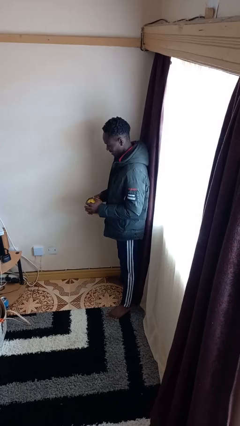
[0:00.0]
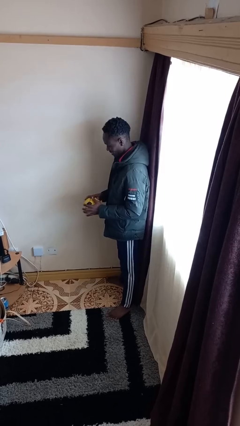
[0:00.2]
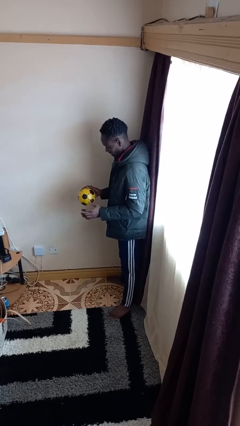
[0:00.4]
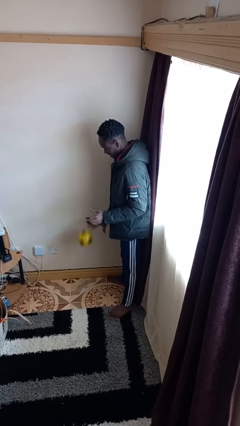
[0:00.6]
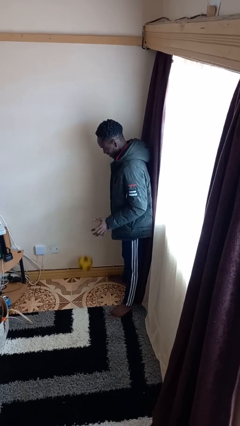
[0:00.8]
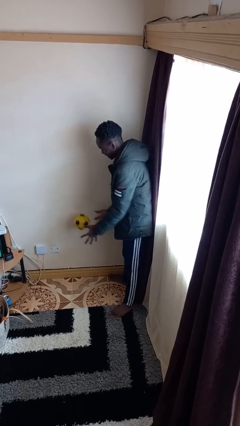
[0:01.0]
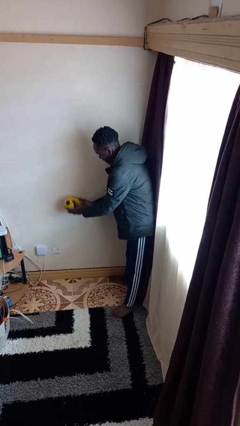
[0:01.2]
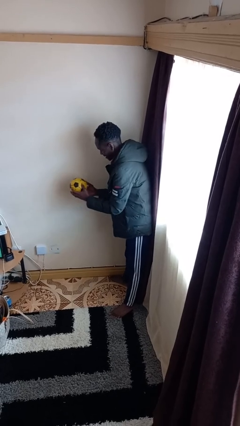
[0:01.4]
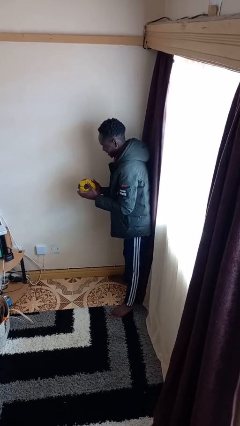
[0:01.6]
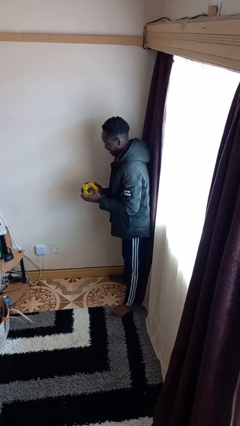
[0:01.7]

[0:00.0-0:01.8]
person bounces ball on floor

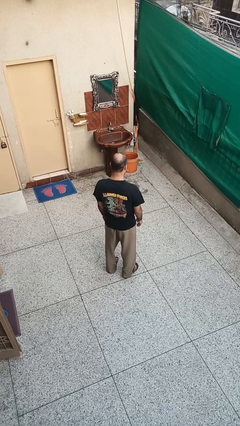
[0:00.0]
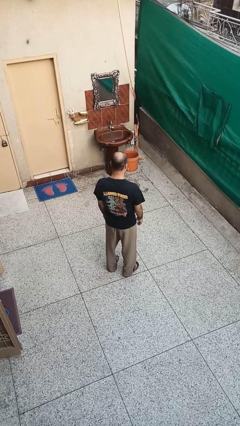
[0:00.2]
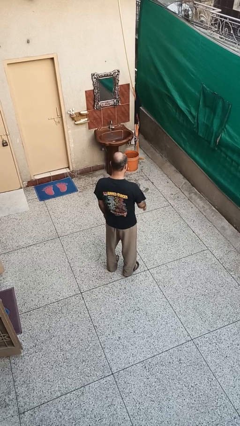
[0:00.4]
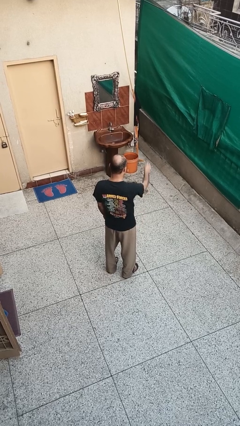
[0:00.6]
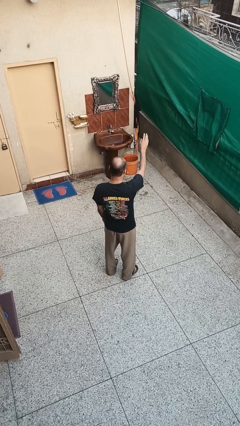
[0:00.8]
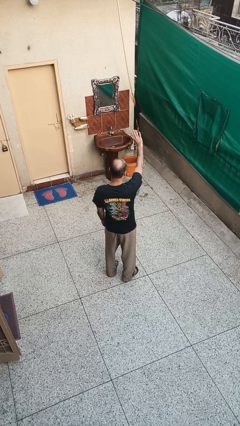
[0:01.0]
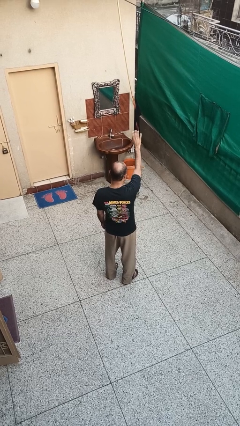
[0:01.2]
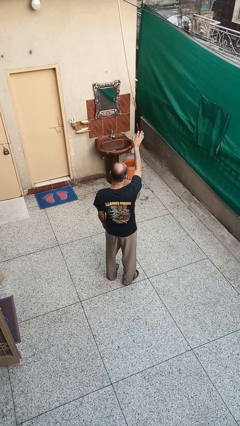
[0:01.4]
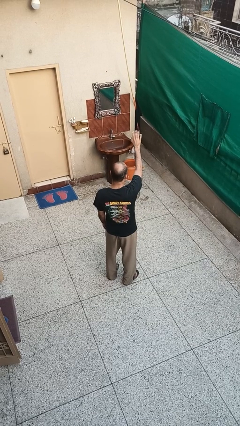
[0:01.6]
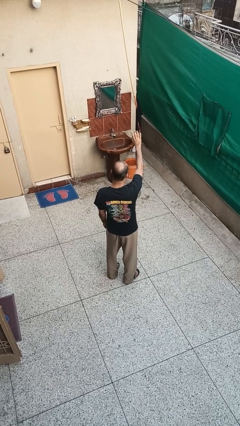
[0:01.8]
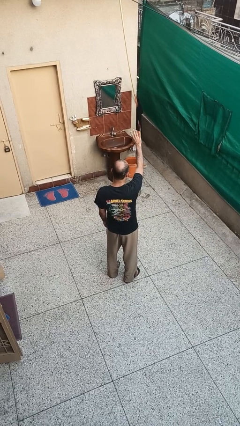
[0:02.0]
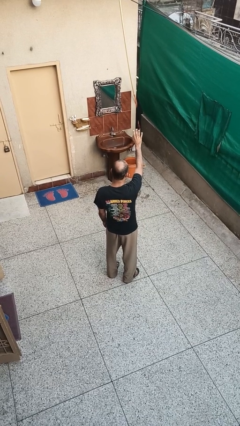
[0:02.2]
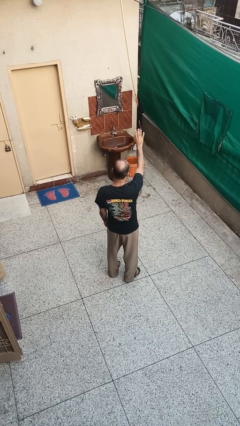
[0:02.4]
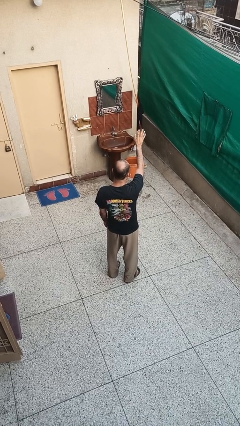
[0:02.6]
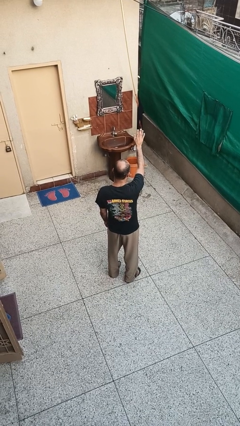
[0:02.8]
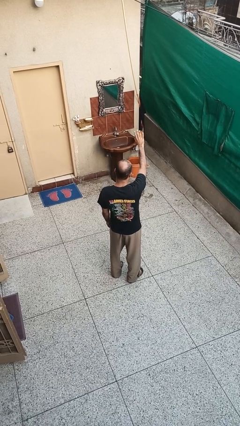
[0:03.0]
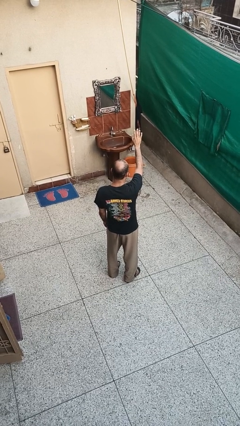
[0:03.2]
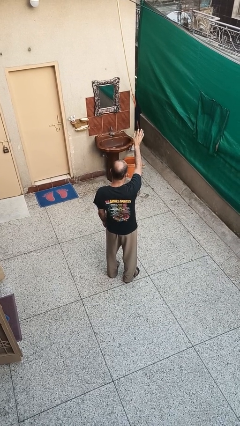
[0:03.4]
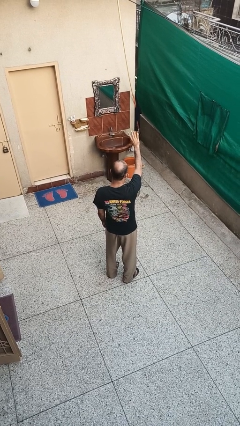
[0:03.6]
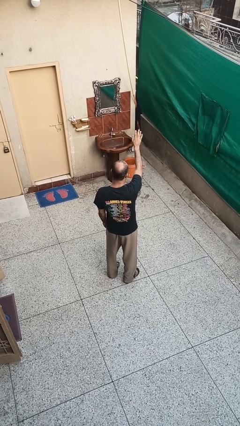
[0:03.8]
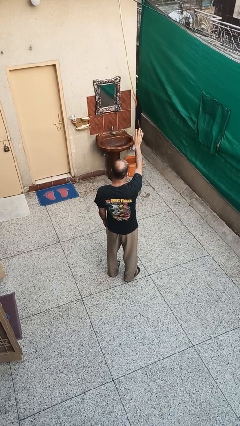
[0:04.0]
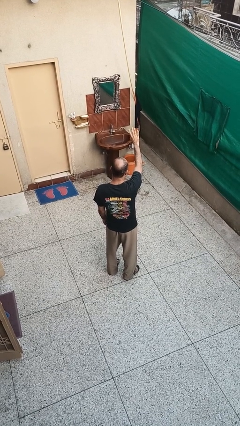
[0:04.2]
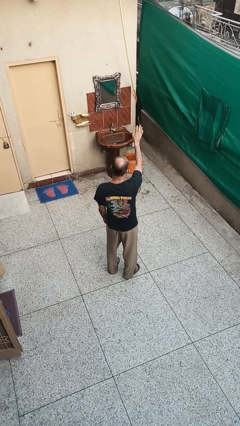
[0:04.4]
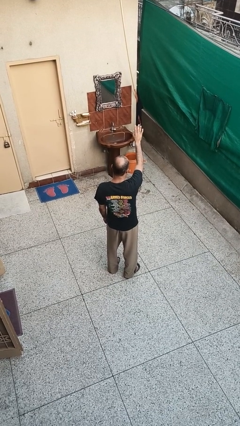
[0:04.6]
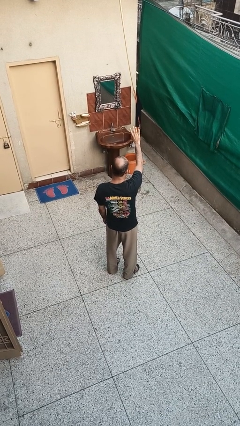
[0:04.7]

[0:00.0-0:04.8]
person waves at person

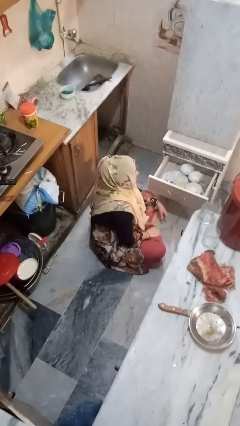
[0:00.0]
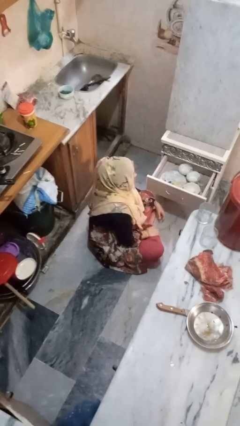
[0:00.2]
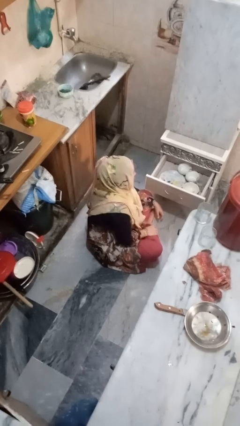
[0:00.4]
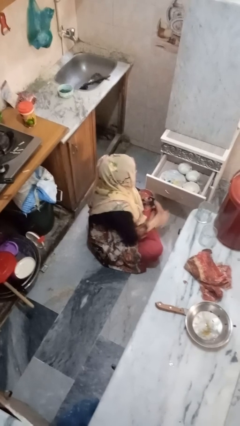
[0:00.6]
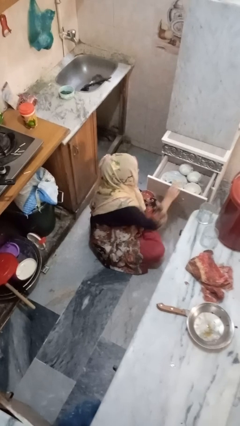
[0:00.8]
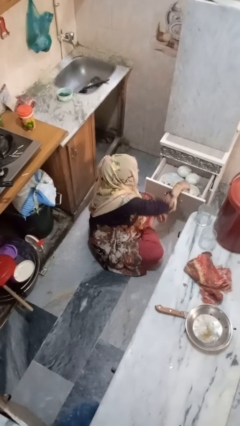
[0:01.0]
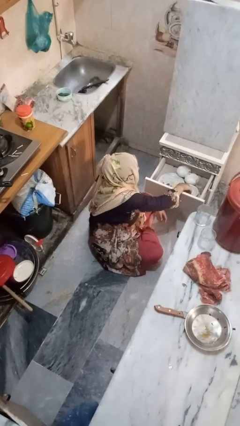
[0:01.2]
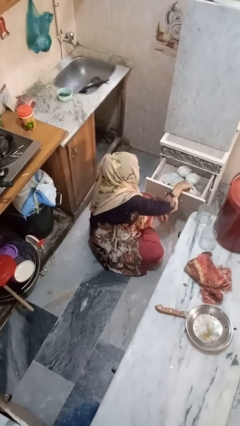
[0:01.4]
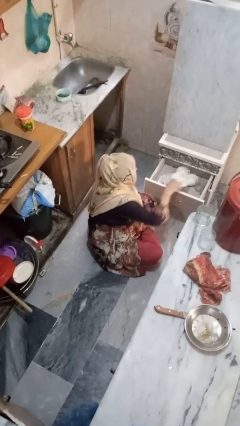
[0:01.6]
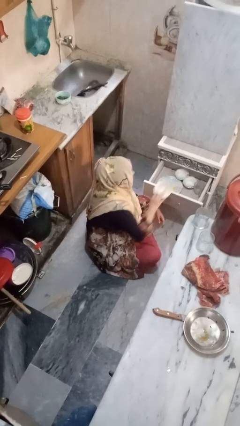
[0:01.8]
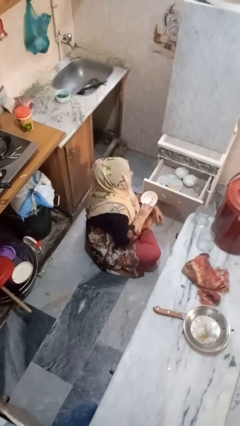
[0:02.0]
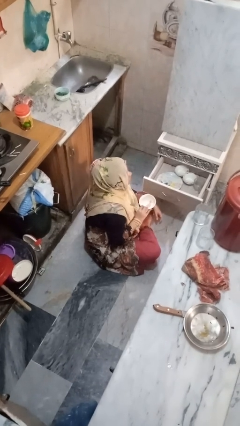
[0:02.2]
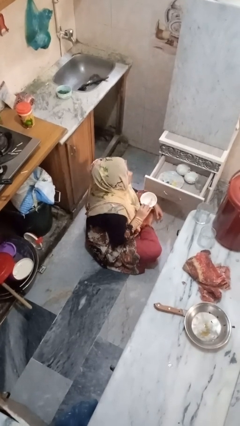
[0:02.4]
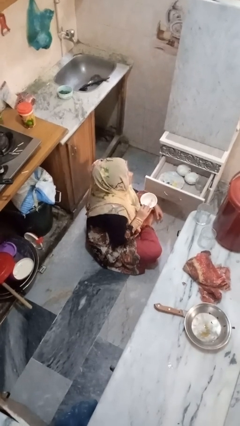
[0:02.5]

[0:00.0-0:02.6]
person takes object from kitchen drawer

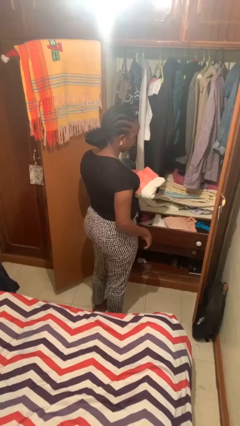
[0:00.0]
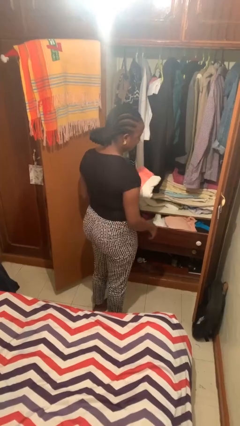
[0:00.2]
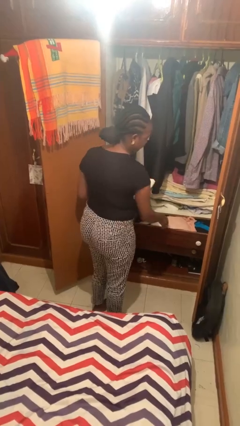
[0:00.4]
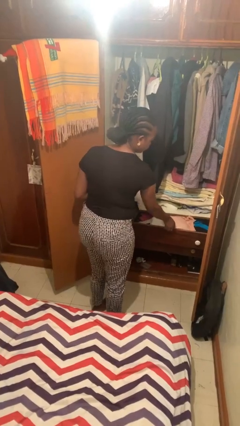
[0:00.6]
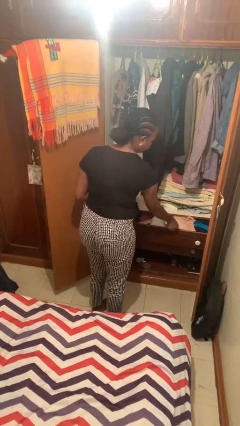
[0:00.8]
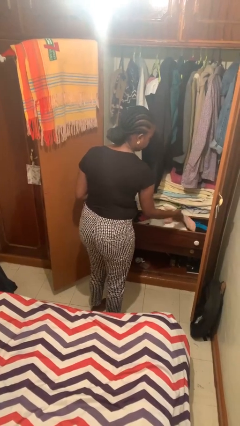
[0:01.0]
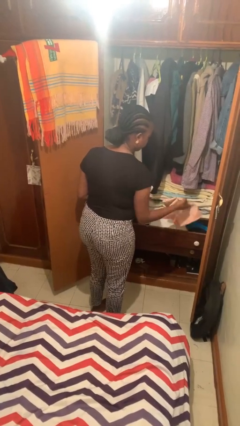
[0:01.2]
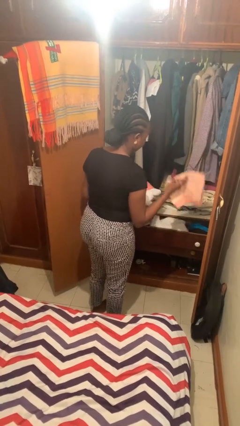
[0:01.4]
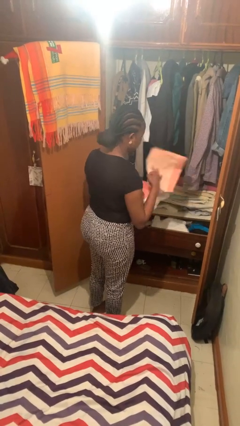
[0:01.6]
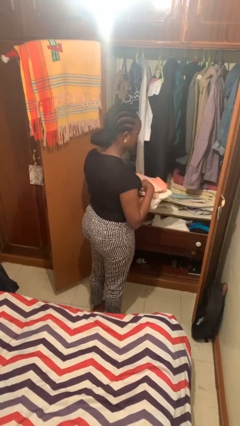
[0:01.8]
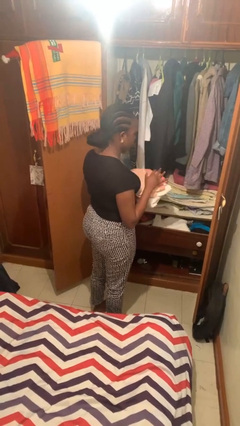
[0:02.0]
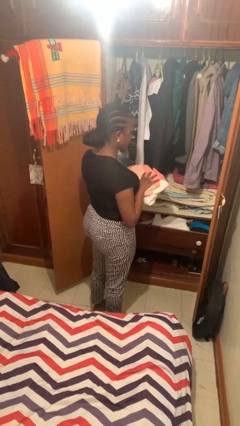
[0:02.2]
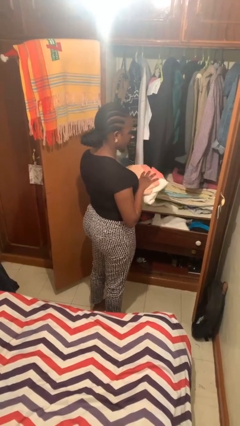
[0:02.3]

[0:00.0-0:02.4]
person takes clothes from dresser

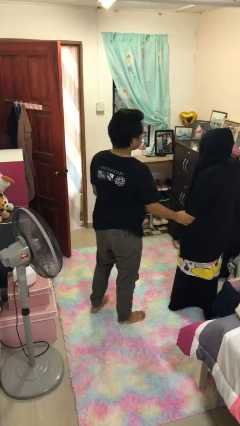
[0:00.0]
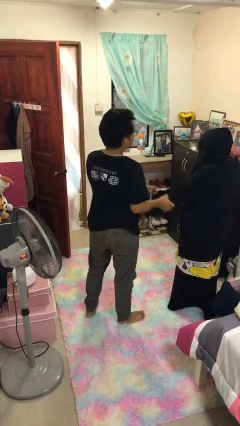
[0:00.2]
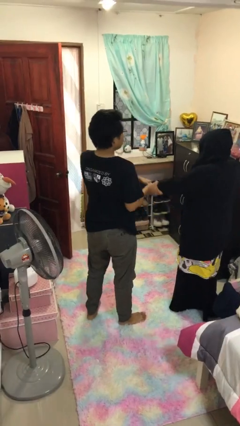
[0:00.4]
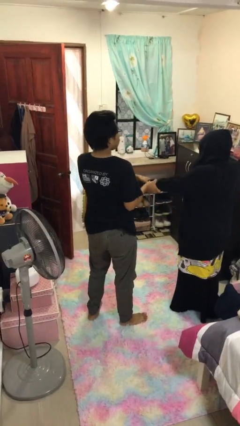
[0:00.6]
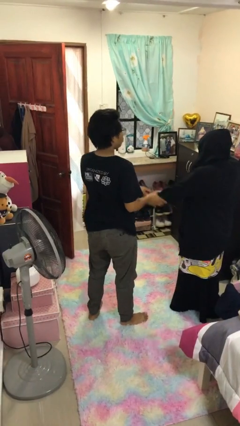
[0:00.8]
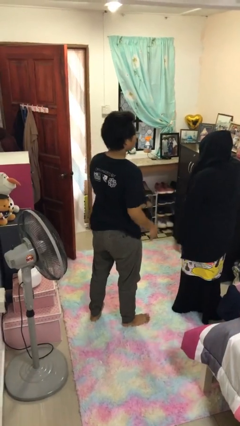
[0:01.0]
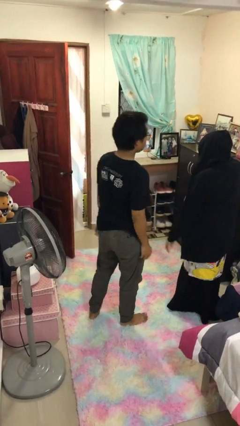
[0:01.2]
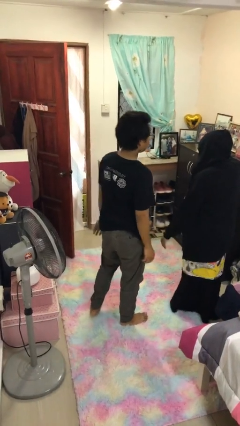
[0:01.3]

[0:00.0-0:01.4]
person grabs person by forearm

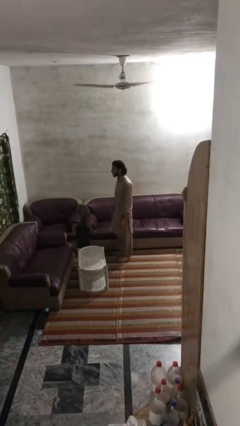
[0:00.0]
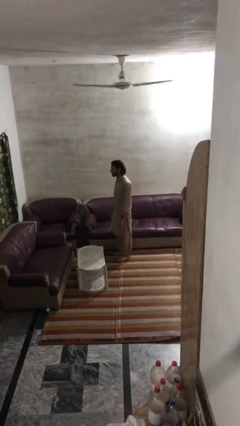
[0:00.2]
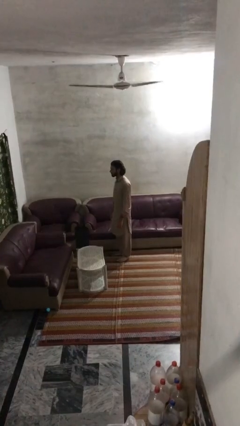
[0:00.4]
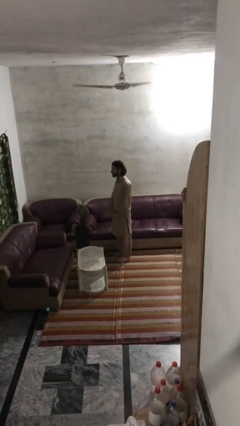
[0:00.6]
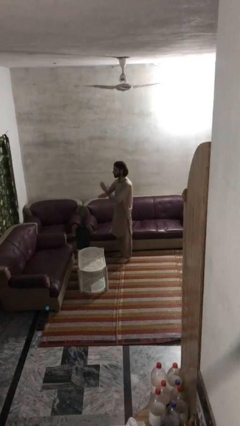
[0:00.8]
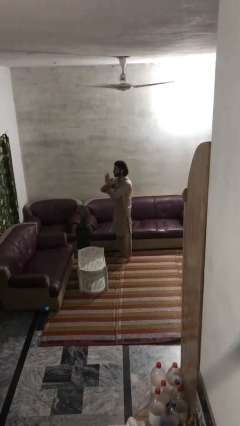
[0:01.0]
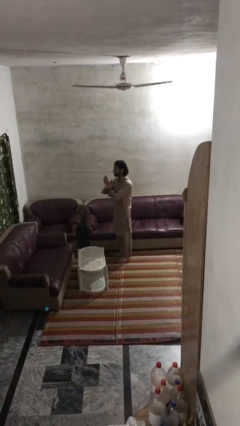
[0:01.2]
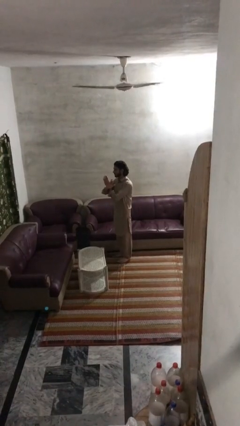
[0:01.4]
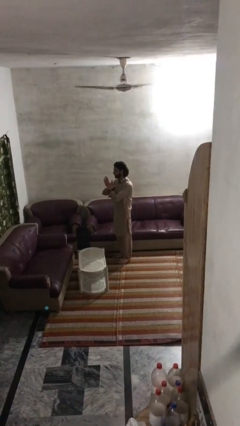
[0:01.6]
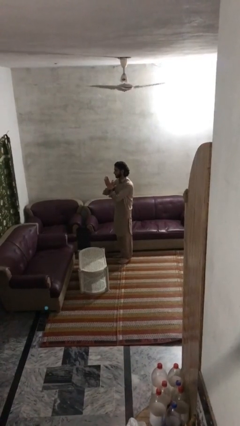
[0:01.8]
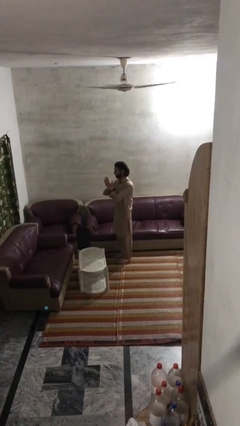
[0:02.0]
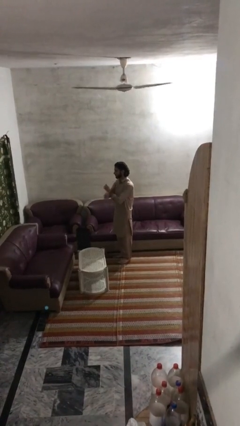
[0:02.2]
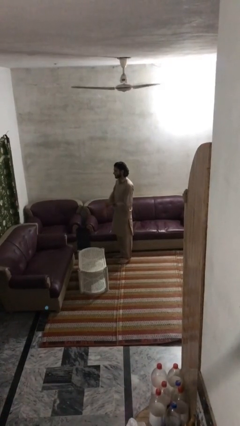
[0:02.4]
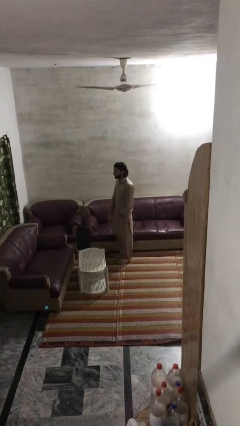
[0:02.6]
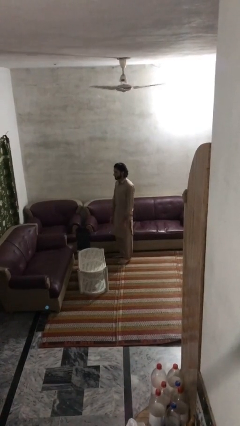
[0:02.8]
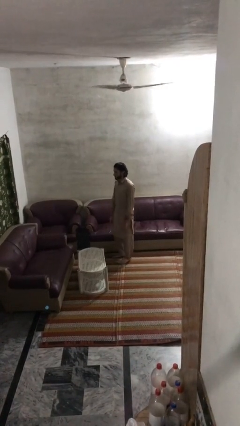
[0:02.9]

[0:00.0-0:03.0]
person gestures arms x

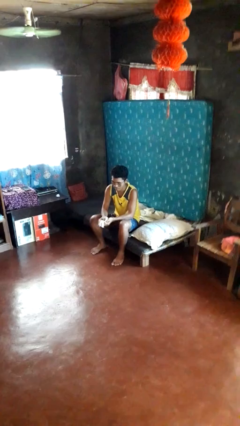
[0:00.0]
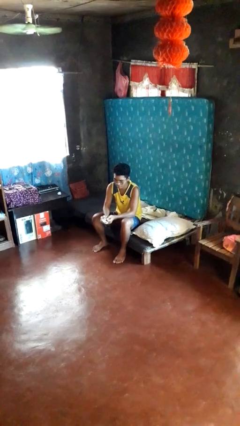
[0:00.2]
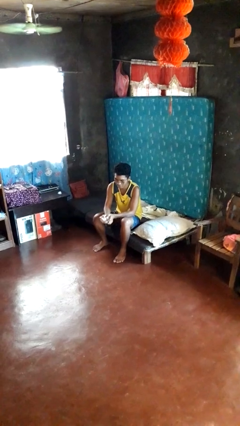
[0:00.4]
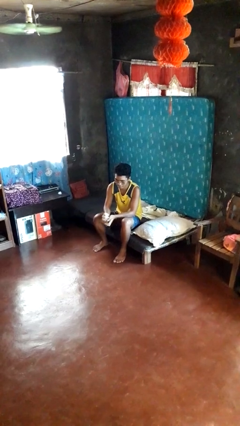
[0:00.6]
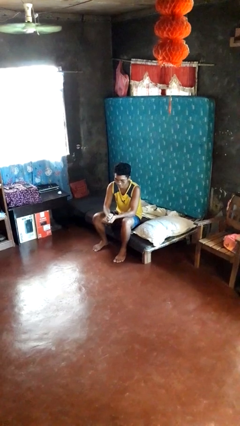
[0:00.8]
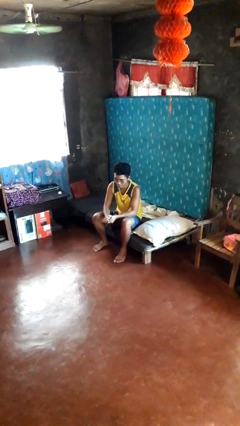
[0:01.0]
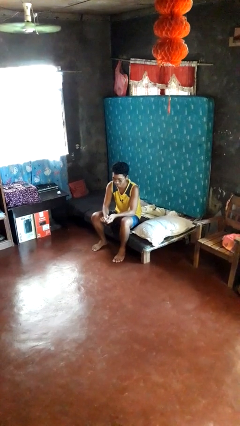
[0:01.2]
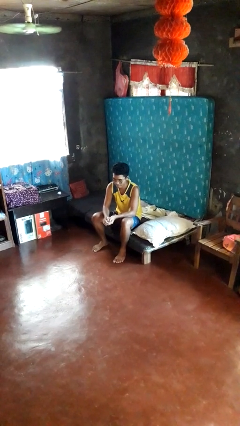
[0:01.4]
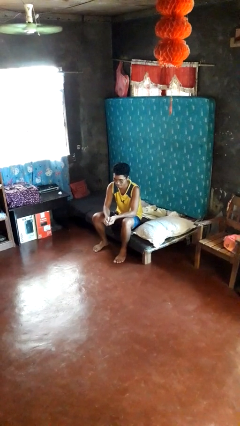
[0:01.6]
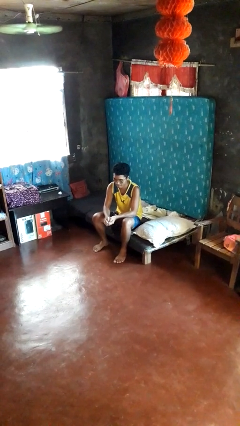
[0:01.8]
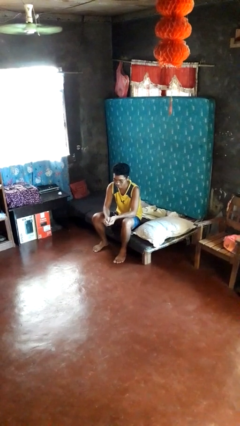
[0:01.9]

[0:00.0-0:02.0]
person crumples paper
